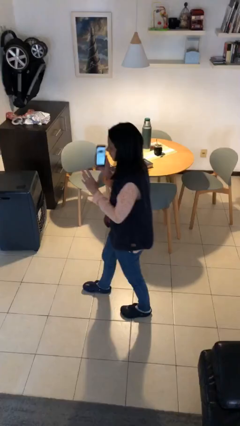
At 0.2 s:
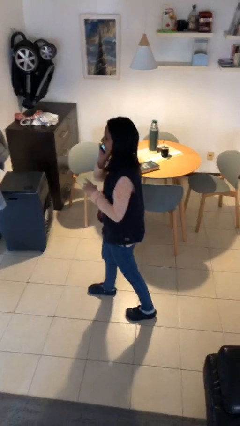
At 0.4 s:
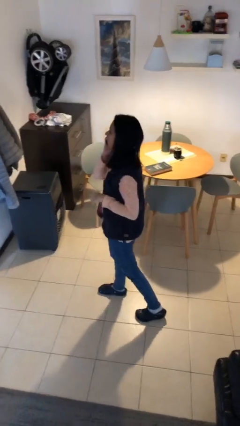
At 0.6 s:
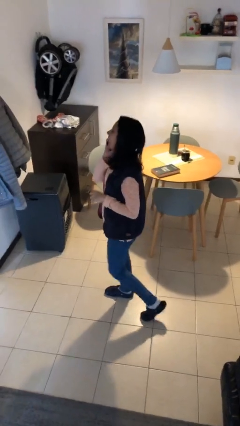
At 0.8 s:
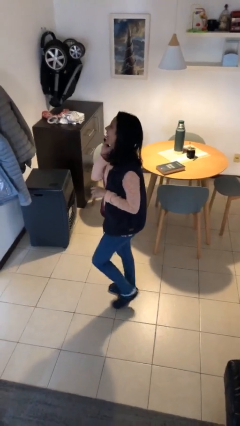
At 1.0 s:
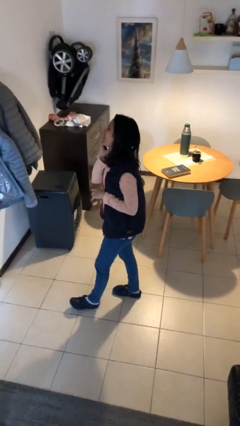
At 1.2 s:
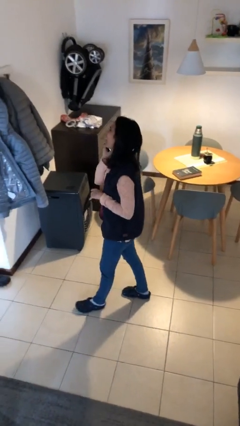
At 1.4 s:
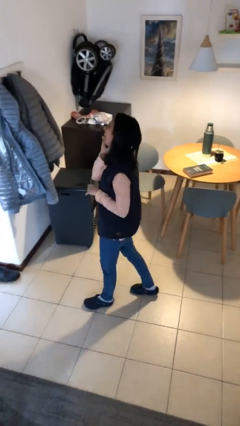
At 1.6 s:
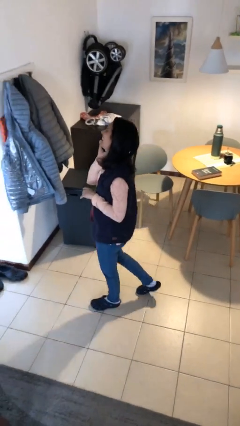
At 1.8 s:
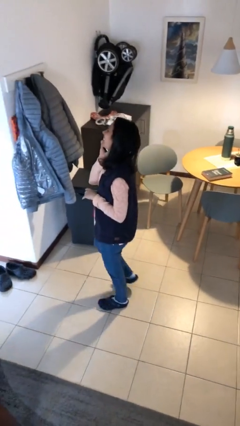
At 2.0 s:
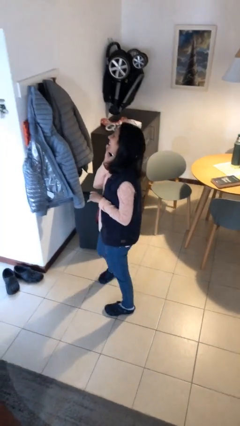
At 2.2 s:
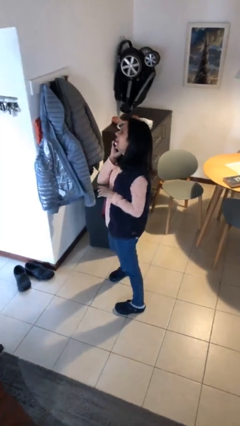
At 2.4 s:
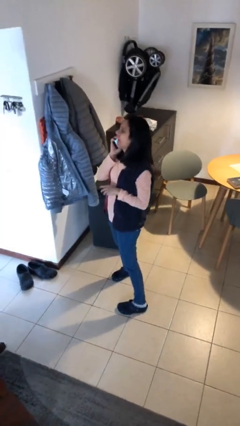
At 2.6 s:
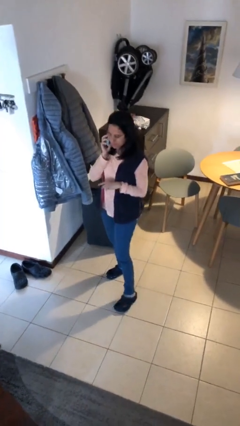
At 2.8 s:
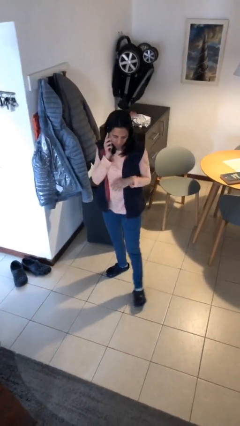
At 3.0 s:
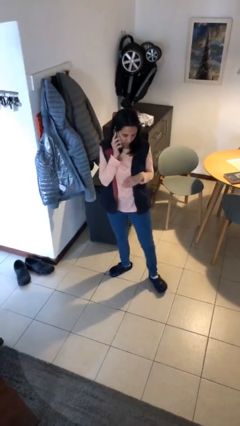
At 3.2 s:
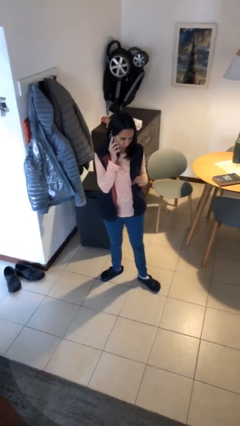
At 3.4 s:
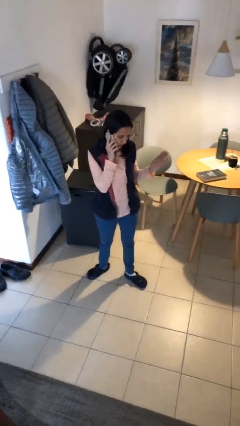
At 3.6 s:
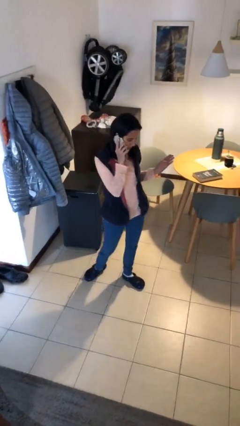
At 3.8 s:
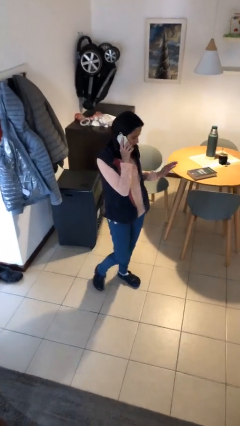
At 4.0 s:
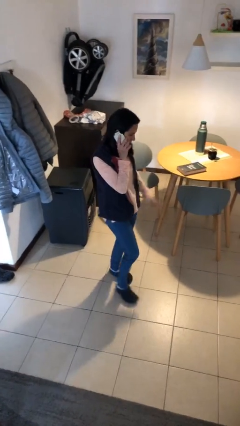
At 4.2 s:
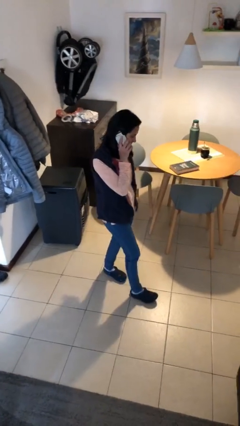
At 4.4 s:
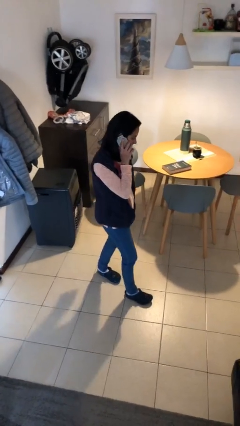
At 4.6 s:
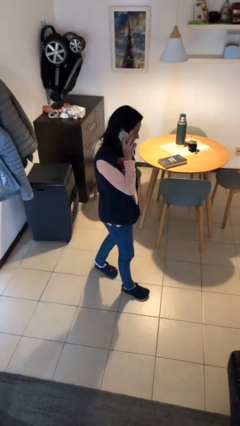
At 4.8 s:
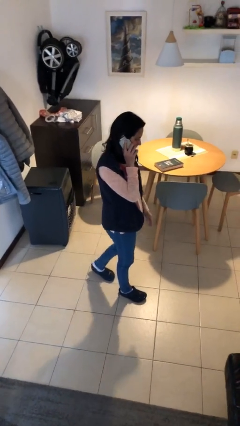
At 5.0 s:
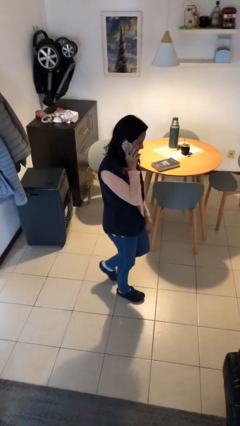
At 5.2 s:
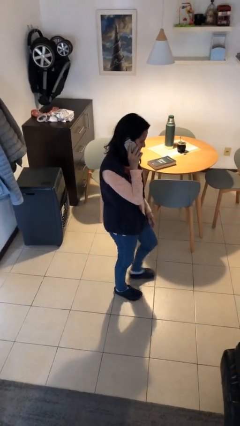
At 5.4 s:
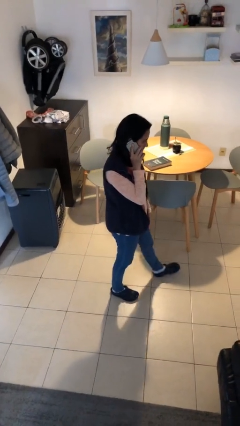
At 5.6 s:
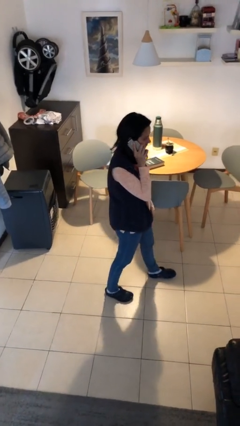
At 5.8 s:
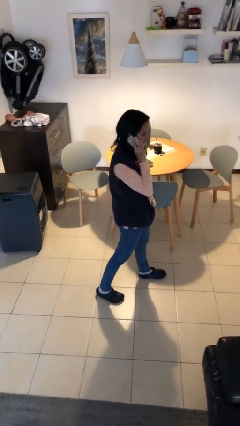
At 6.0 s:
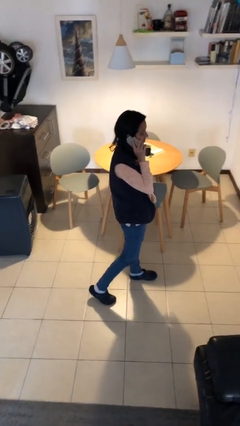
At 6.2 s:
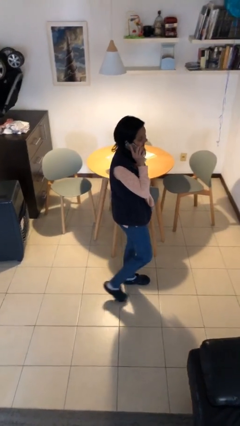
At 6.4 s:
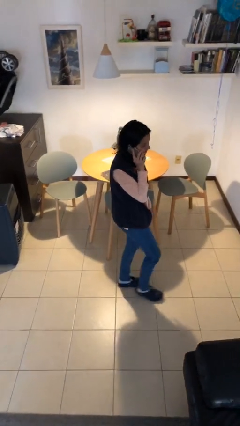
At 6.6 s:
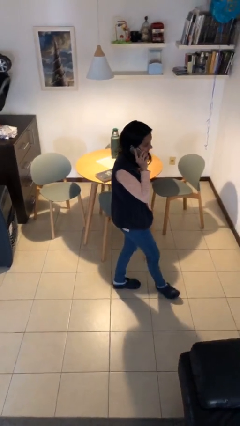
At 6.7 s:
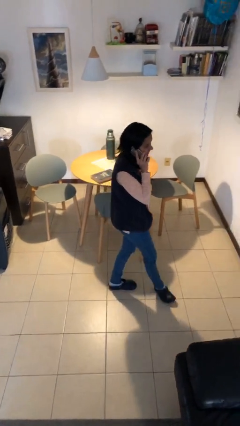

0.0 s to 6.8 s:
person talks on phone

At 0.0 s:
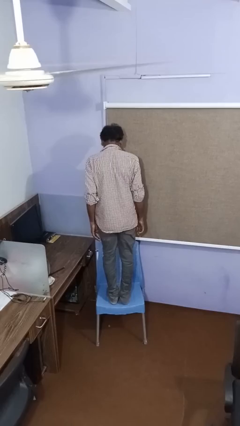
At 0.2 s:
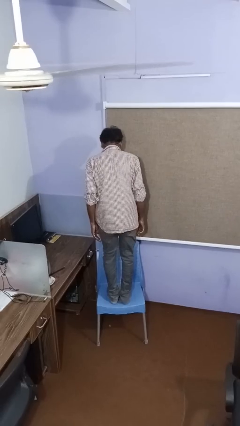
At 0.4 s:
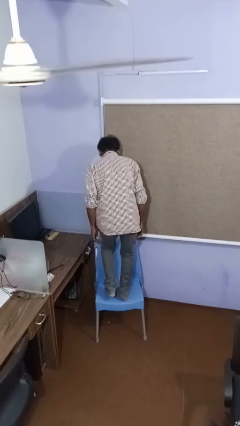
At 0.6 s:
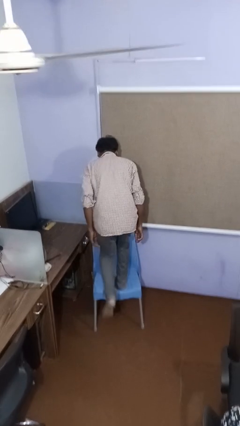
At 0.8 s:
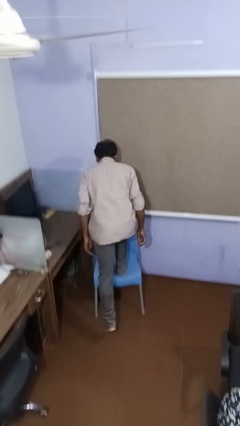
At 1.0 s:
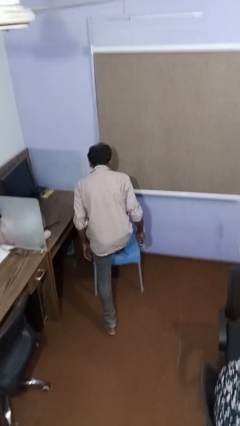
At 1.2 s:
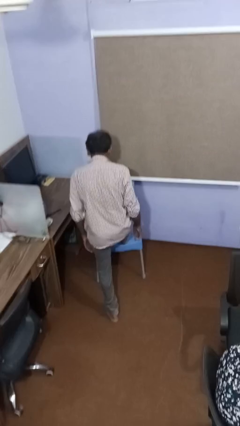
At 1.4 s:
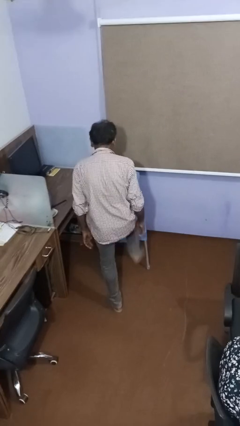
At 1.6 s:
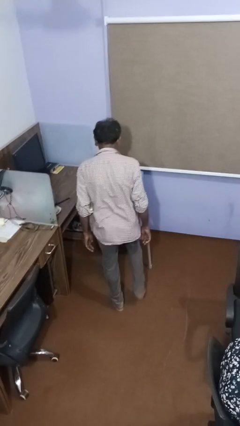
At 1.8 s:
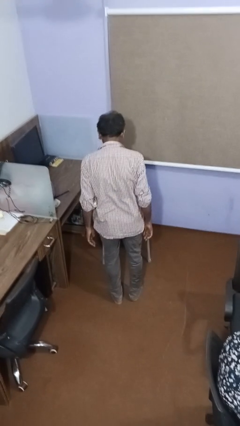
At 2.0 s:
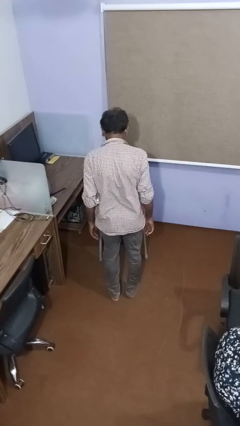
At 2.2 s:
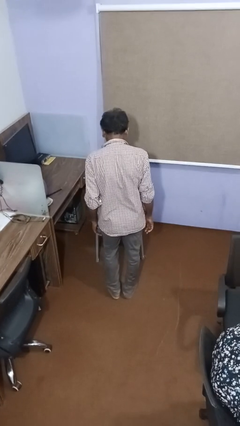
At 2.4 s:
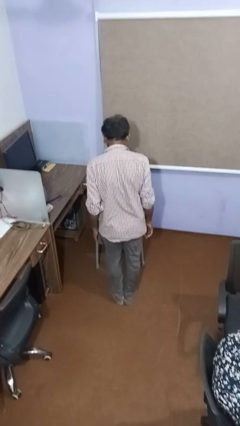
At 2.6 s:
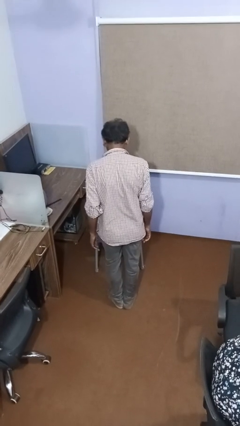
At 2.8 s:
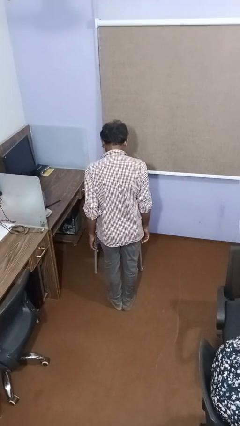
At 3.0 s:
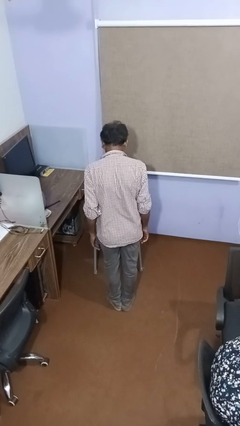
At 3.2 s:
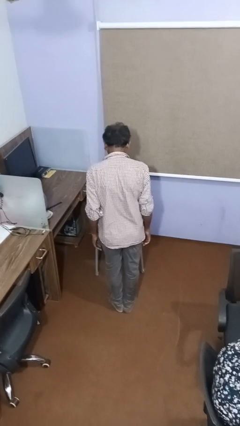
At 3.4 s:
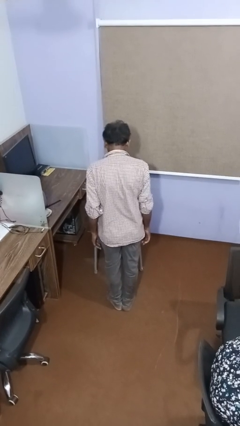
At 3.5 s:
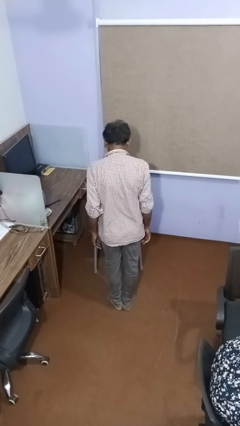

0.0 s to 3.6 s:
person climbs off chair

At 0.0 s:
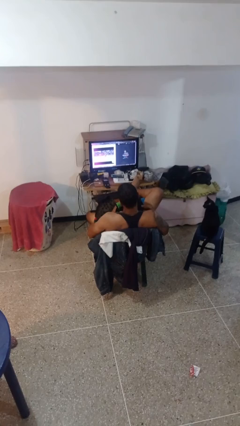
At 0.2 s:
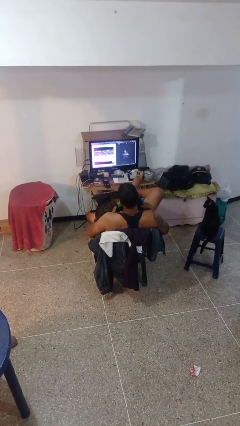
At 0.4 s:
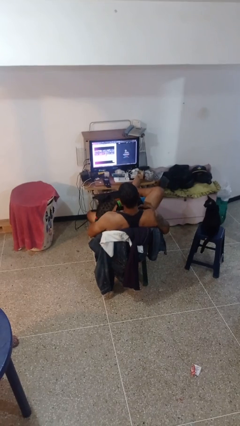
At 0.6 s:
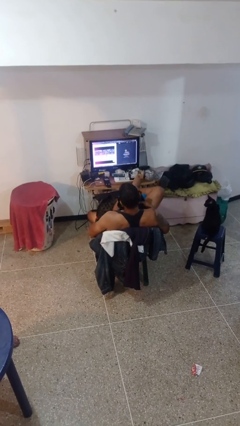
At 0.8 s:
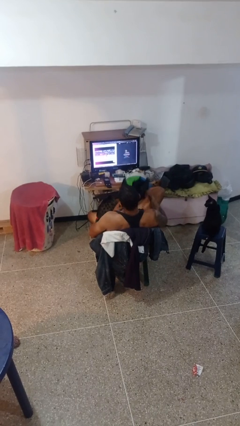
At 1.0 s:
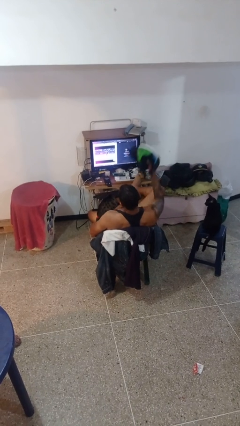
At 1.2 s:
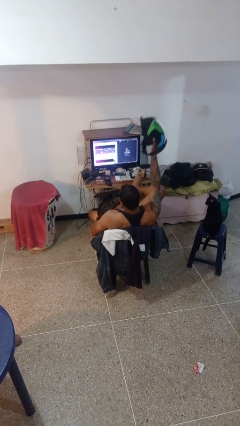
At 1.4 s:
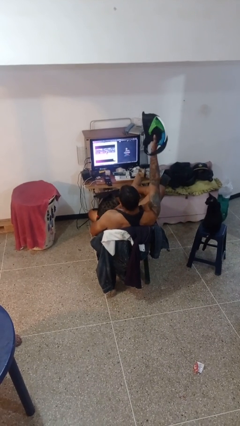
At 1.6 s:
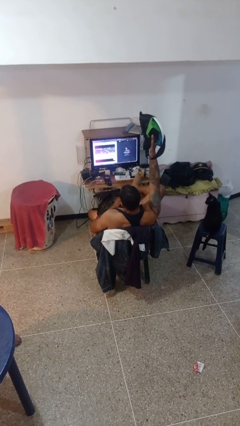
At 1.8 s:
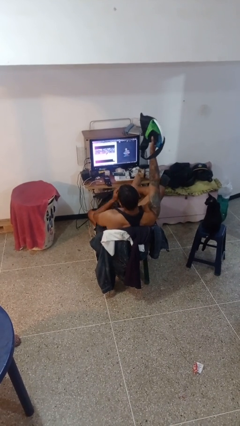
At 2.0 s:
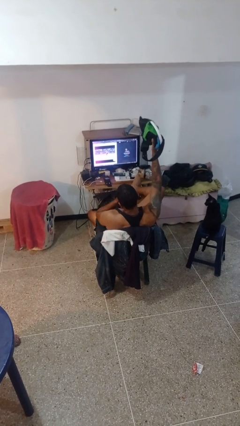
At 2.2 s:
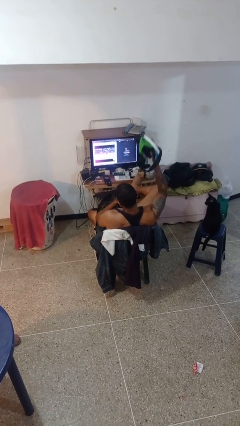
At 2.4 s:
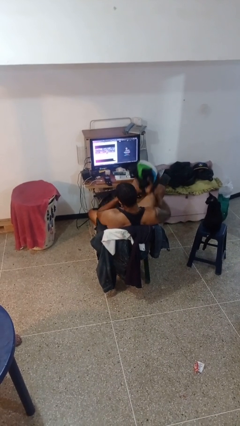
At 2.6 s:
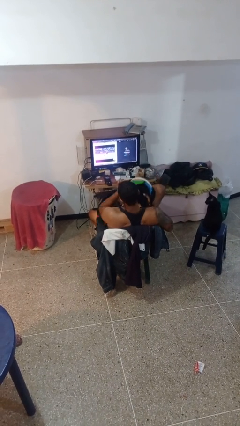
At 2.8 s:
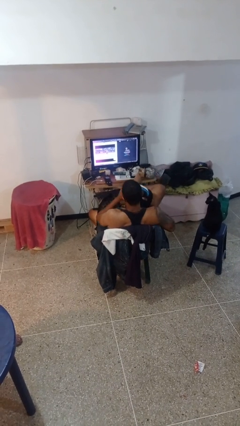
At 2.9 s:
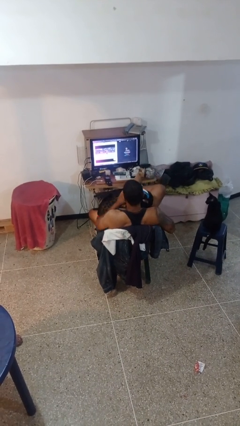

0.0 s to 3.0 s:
person holds object above head

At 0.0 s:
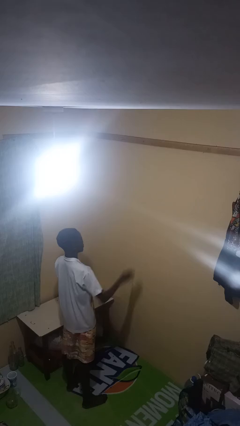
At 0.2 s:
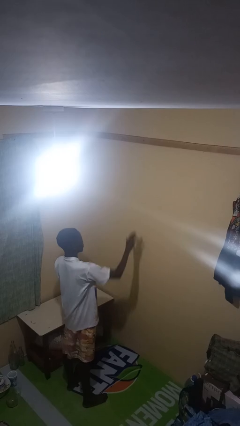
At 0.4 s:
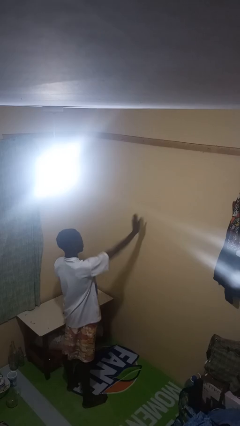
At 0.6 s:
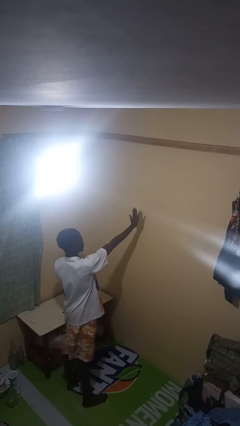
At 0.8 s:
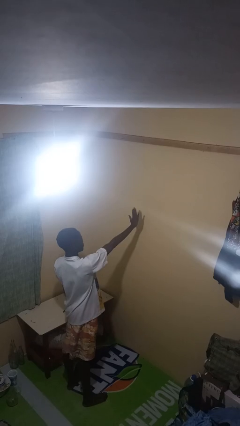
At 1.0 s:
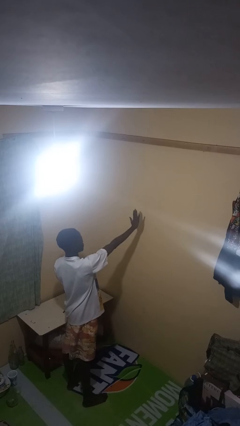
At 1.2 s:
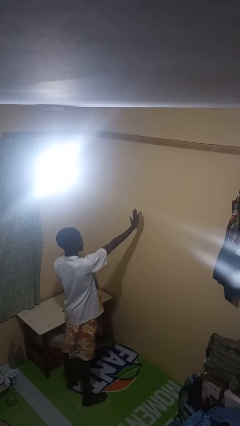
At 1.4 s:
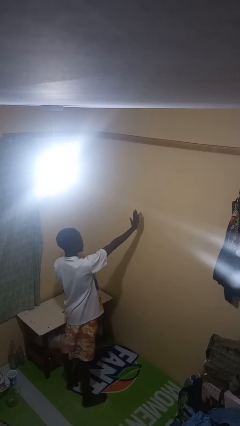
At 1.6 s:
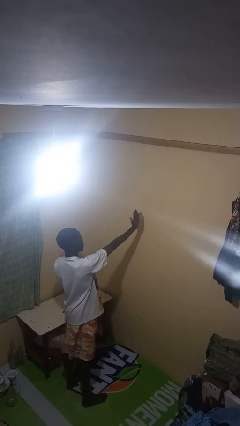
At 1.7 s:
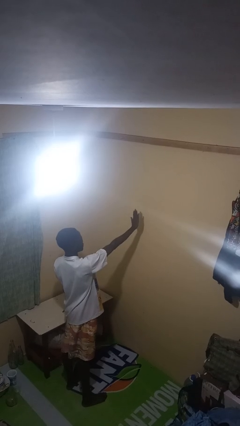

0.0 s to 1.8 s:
person gestures stop

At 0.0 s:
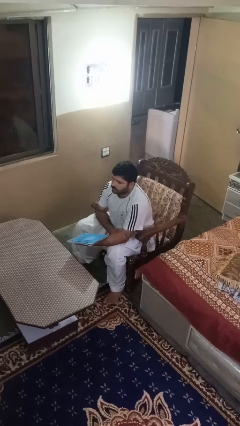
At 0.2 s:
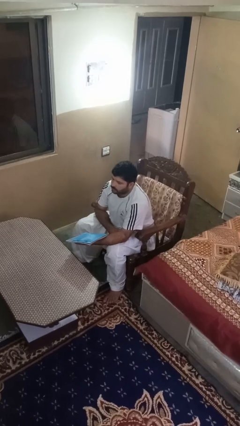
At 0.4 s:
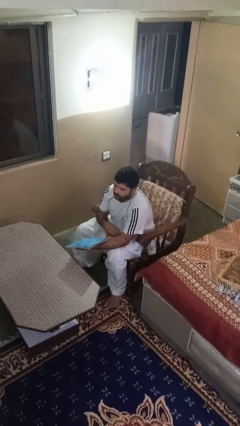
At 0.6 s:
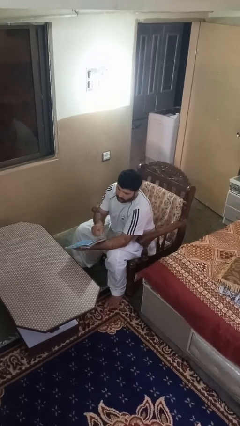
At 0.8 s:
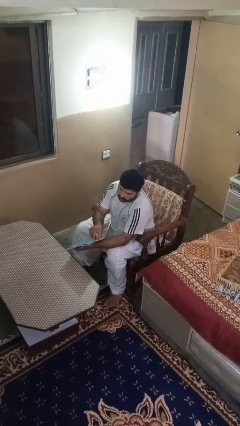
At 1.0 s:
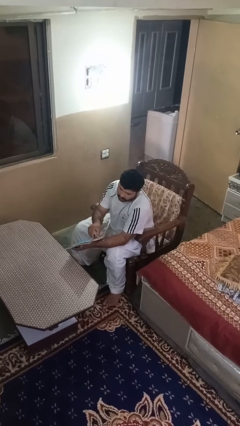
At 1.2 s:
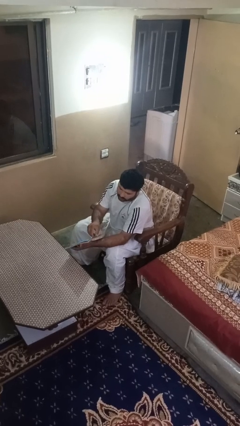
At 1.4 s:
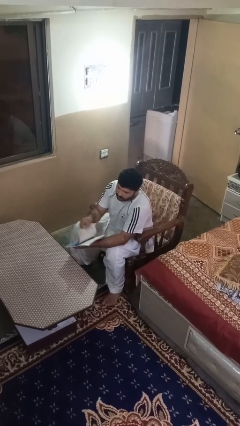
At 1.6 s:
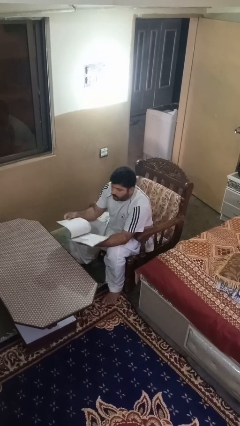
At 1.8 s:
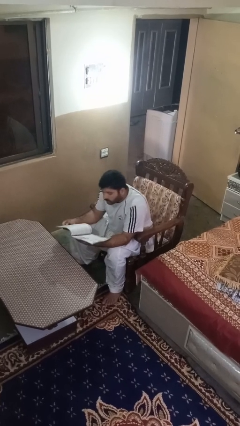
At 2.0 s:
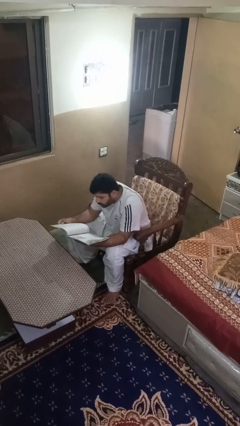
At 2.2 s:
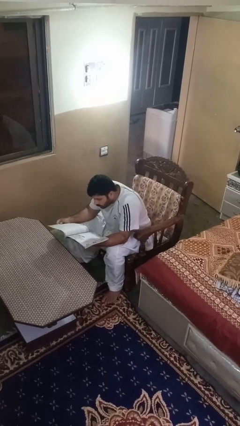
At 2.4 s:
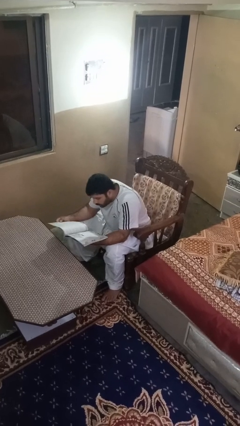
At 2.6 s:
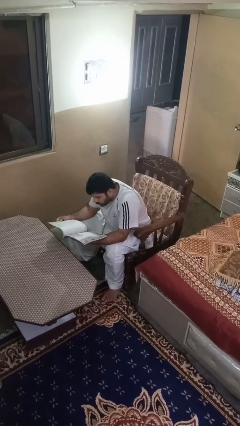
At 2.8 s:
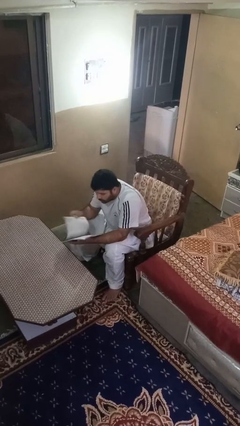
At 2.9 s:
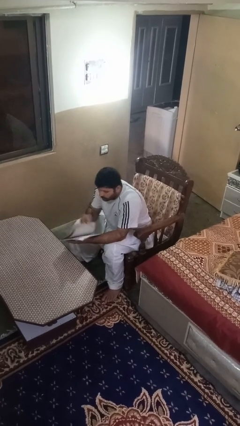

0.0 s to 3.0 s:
person reads magazine
